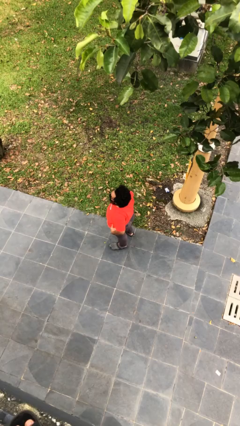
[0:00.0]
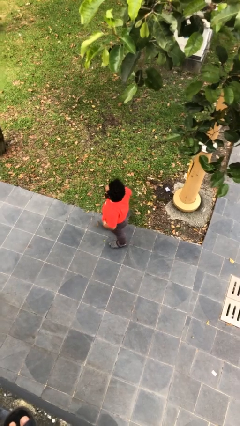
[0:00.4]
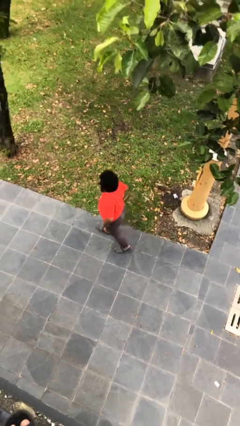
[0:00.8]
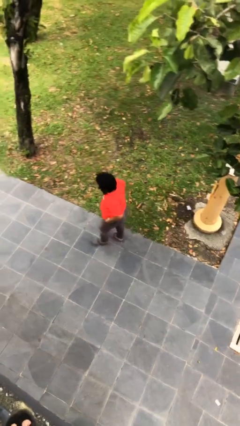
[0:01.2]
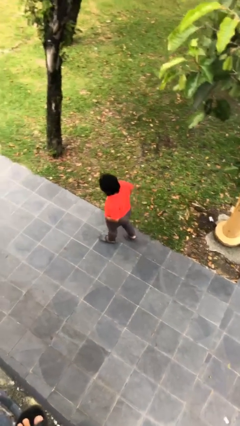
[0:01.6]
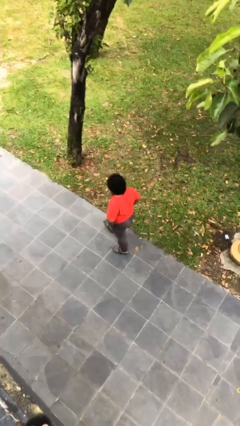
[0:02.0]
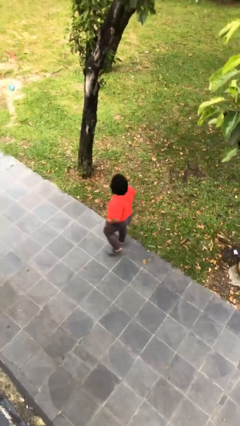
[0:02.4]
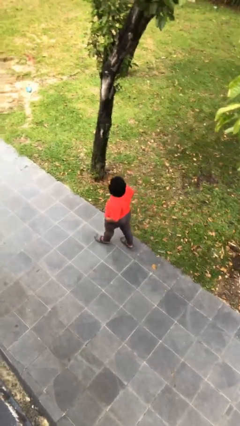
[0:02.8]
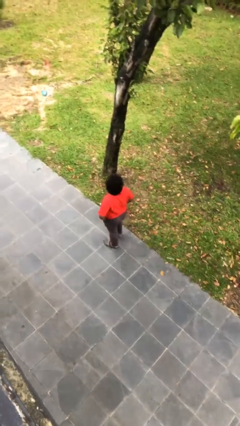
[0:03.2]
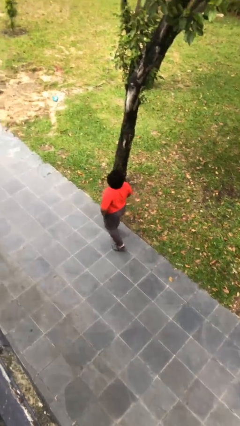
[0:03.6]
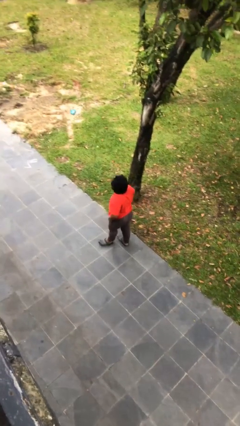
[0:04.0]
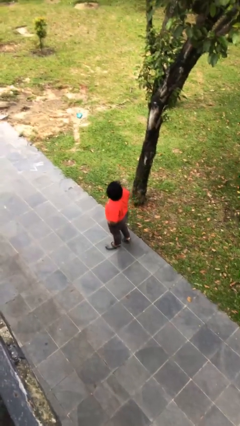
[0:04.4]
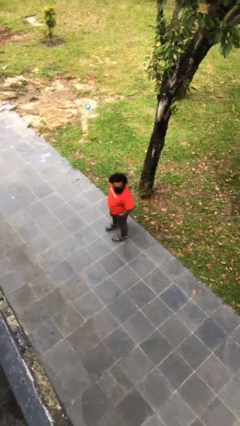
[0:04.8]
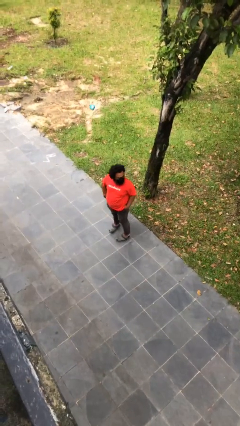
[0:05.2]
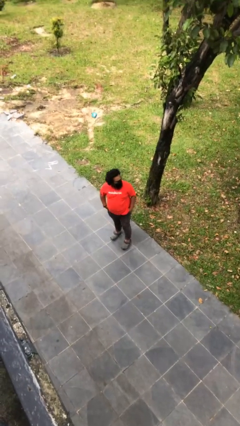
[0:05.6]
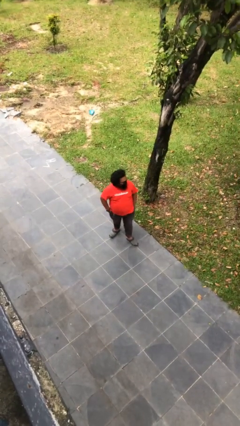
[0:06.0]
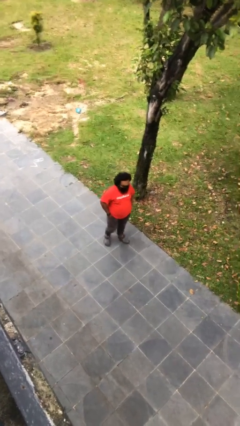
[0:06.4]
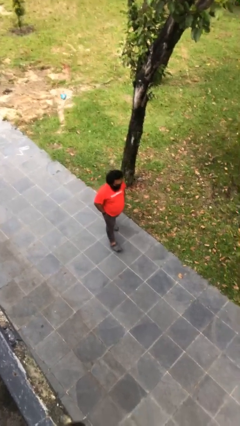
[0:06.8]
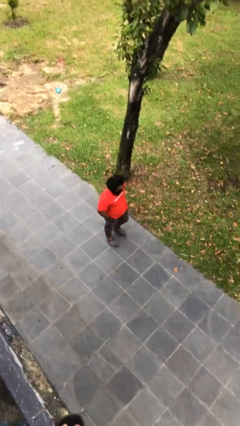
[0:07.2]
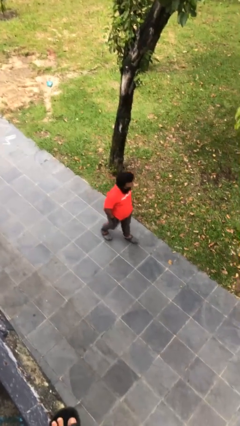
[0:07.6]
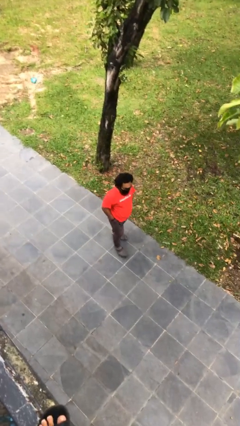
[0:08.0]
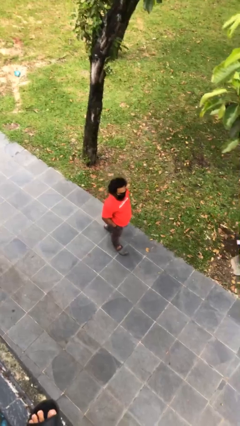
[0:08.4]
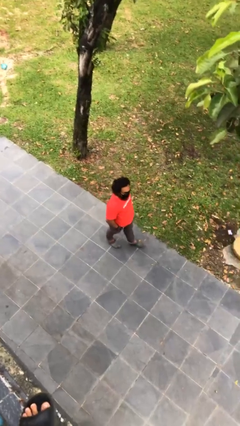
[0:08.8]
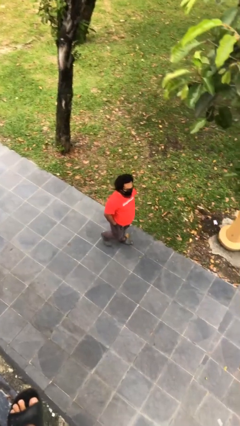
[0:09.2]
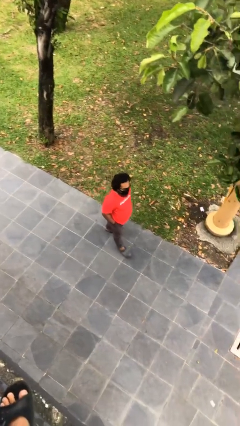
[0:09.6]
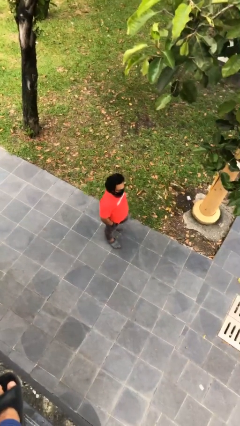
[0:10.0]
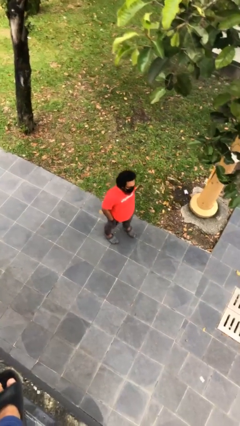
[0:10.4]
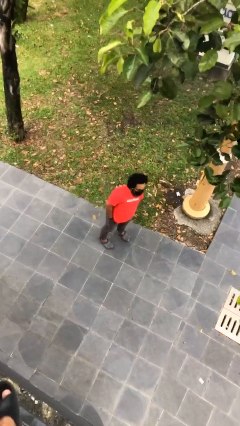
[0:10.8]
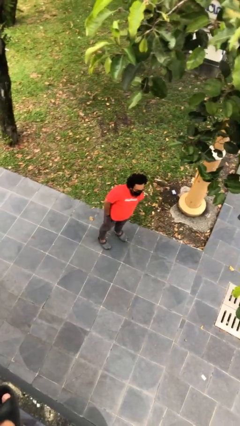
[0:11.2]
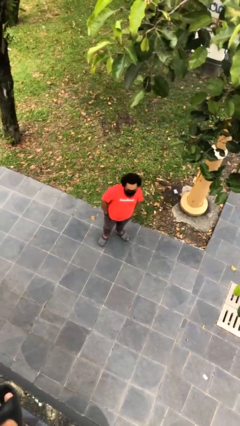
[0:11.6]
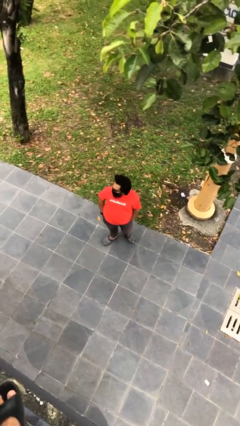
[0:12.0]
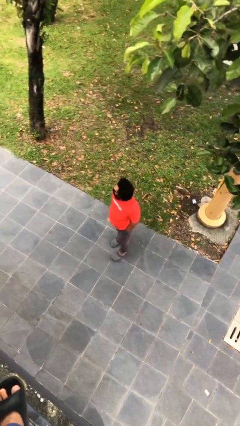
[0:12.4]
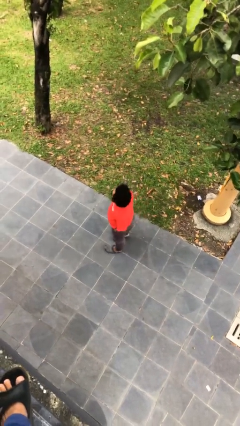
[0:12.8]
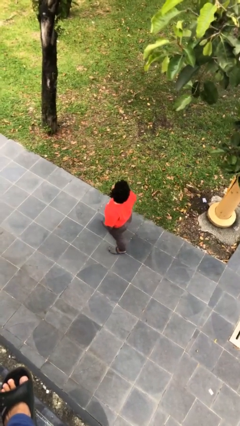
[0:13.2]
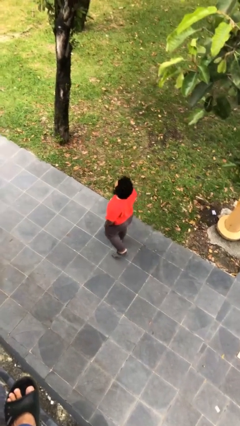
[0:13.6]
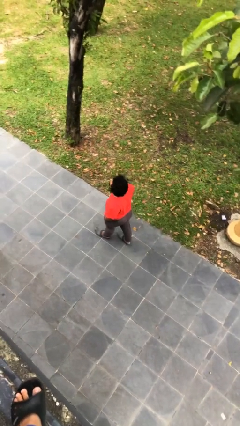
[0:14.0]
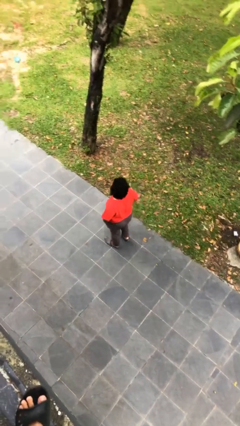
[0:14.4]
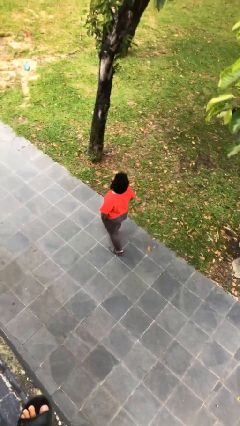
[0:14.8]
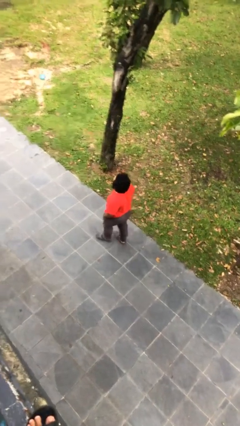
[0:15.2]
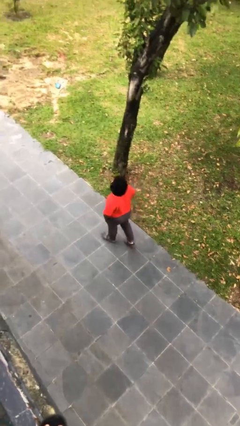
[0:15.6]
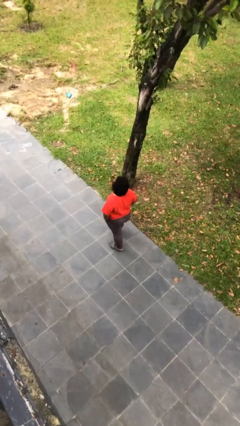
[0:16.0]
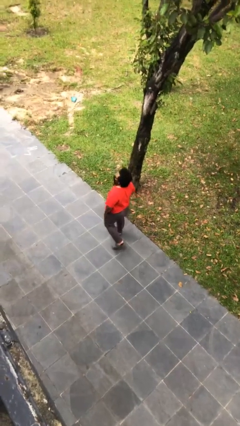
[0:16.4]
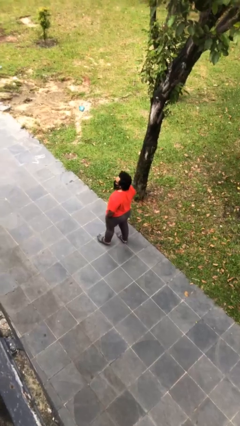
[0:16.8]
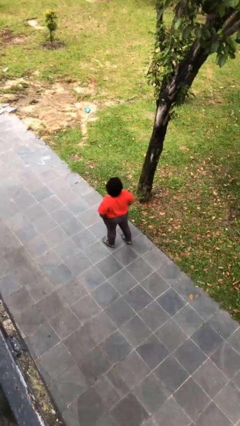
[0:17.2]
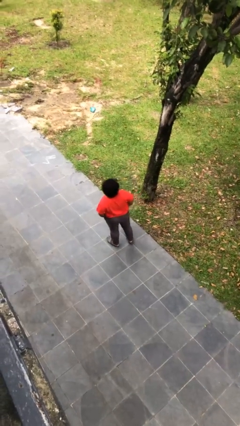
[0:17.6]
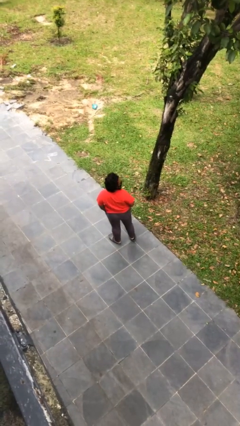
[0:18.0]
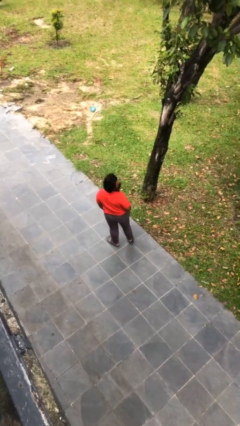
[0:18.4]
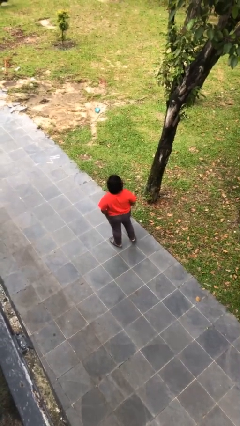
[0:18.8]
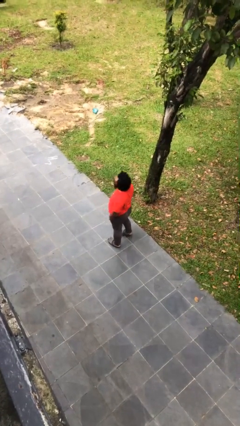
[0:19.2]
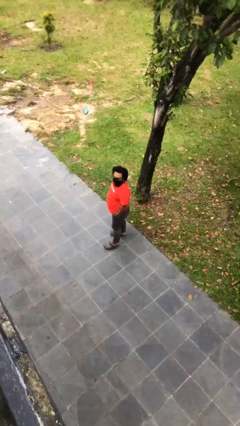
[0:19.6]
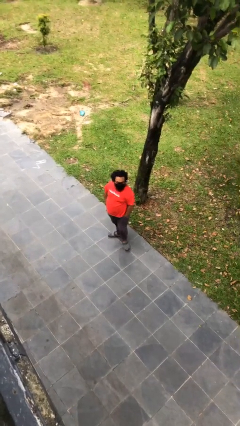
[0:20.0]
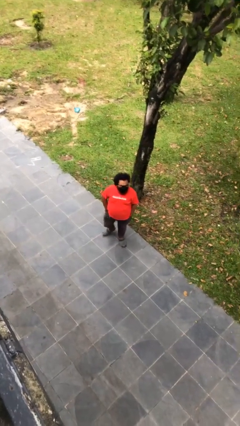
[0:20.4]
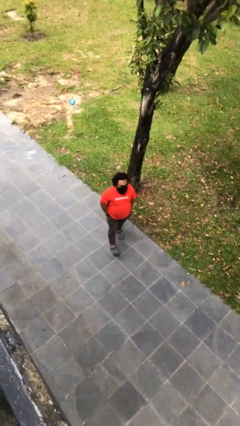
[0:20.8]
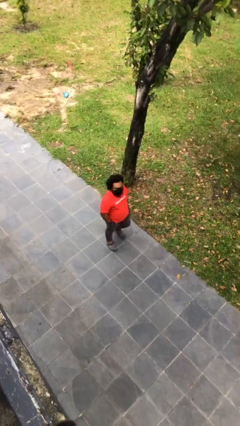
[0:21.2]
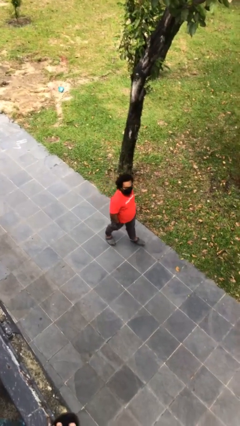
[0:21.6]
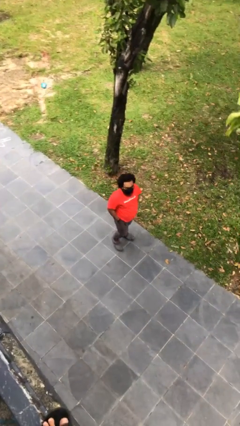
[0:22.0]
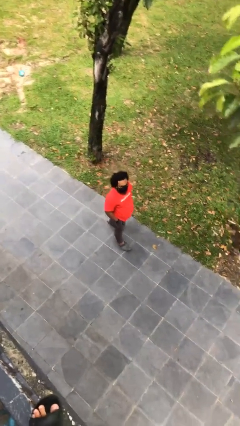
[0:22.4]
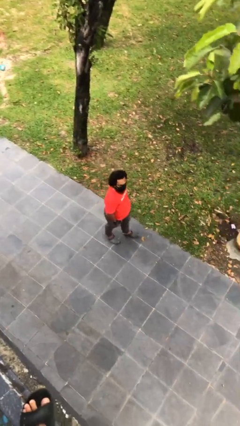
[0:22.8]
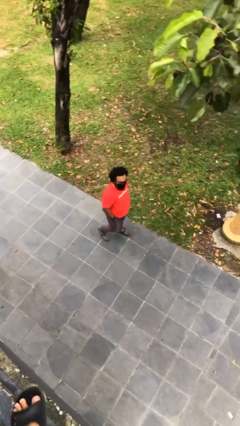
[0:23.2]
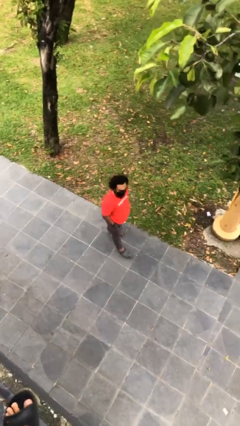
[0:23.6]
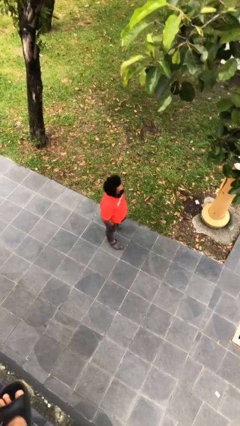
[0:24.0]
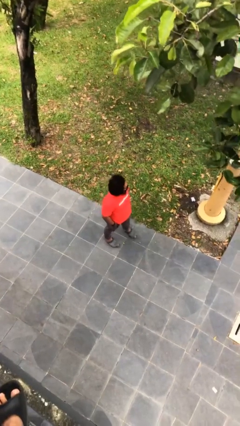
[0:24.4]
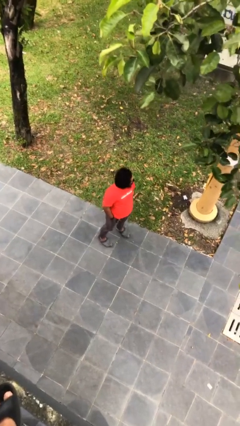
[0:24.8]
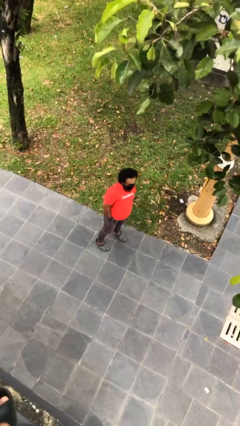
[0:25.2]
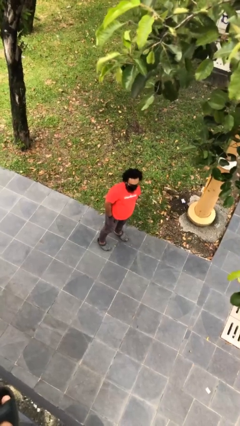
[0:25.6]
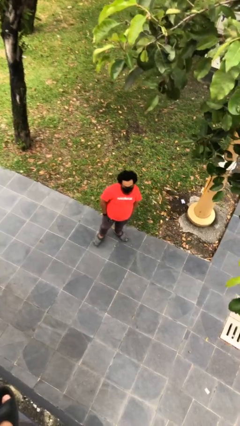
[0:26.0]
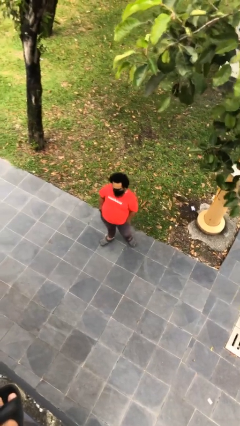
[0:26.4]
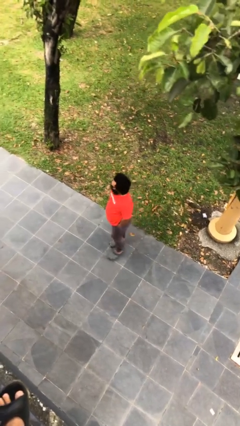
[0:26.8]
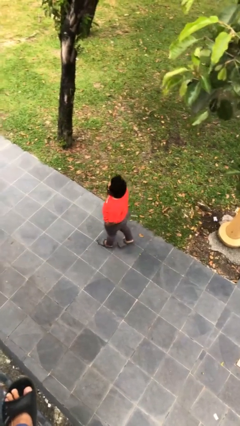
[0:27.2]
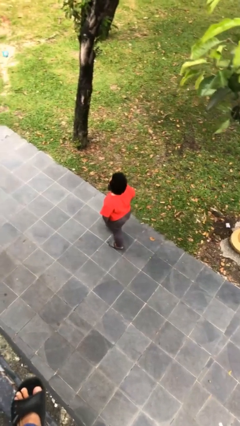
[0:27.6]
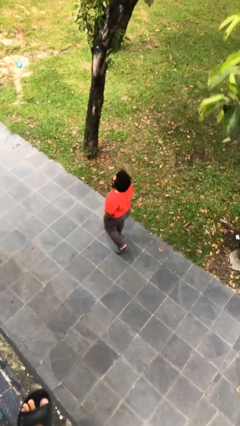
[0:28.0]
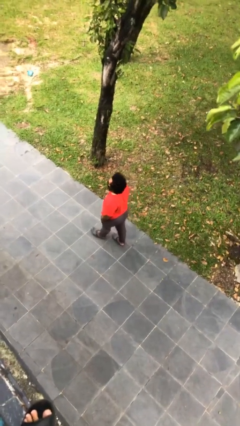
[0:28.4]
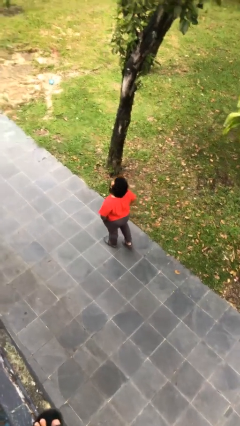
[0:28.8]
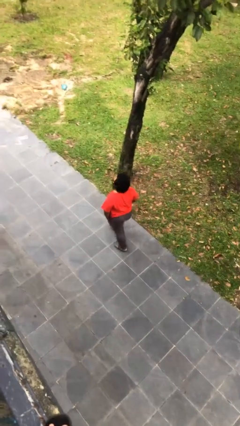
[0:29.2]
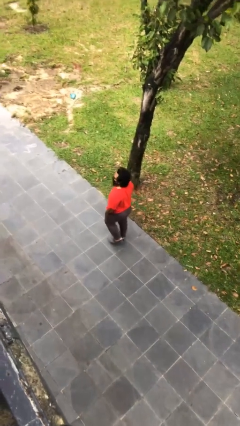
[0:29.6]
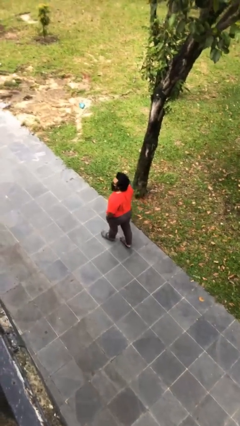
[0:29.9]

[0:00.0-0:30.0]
person walks

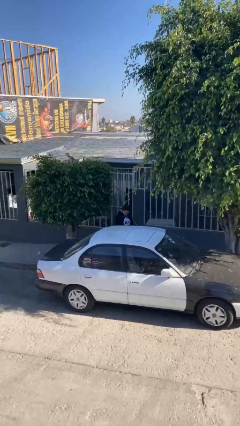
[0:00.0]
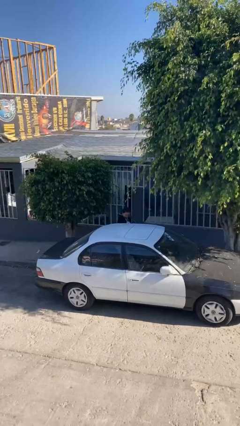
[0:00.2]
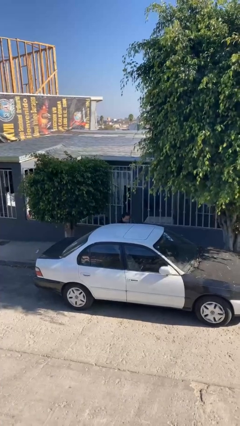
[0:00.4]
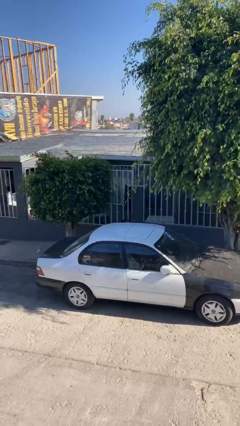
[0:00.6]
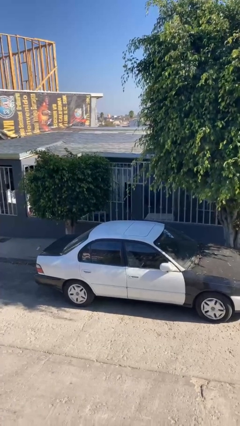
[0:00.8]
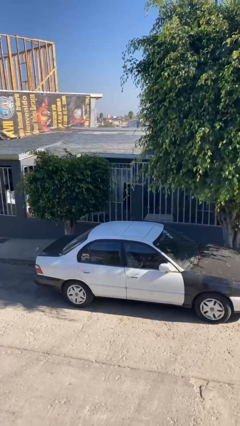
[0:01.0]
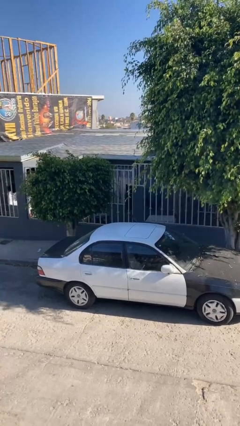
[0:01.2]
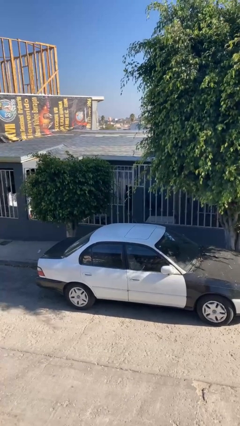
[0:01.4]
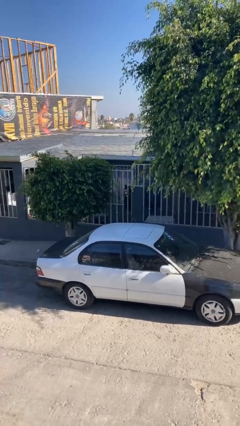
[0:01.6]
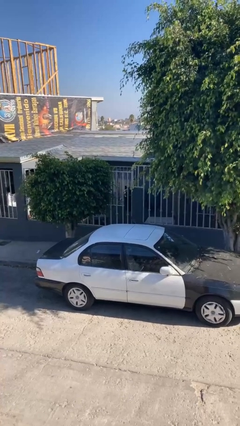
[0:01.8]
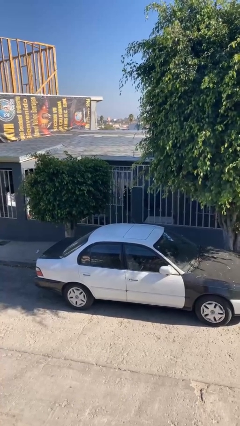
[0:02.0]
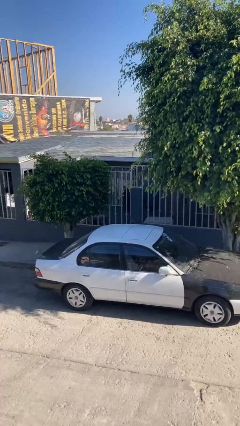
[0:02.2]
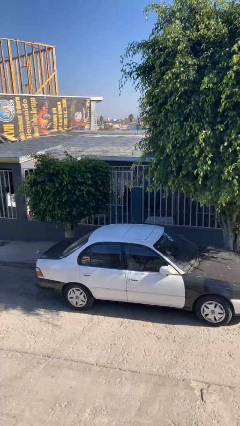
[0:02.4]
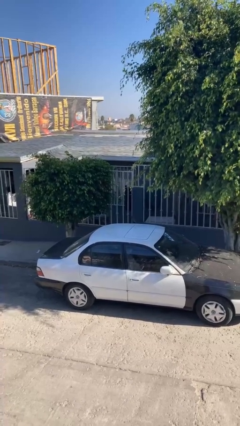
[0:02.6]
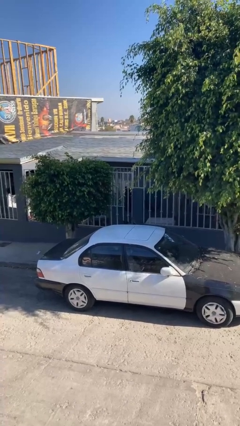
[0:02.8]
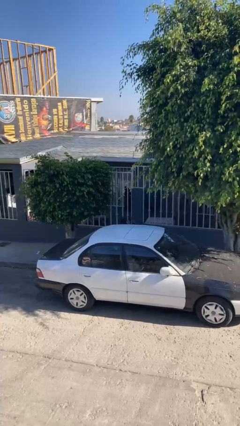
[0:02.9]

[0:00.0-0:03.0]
person enters car
